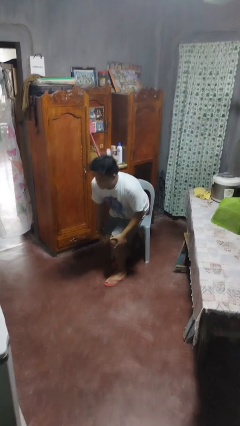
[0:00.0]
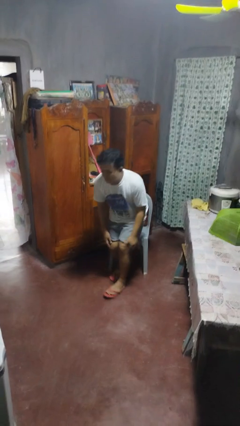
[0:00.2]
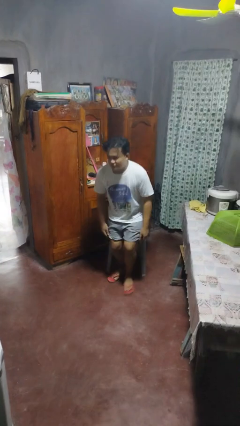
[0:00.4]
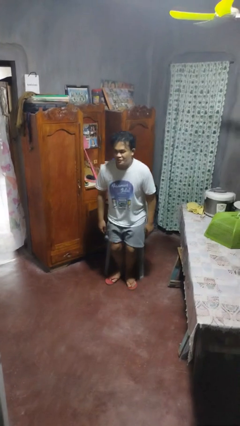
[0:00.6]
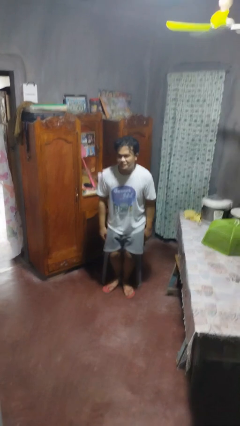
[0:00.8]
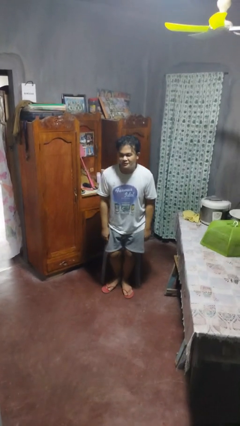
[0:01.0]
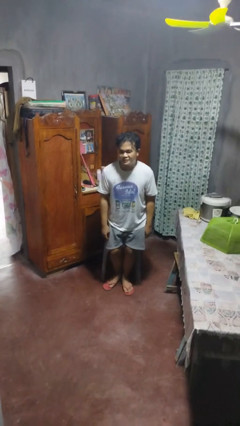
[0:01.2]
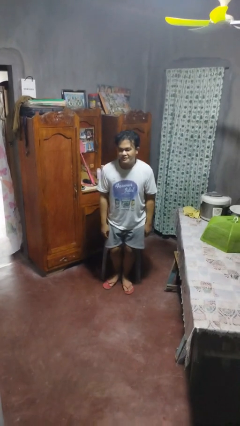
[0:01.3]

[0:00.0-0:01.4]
person stands up from floor

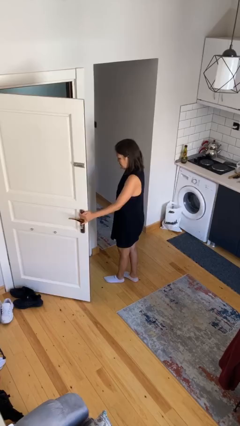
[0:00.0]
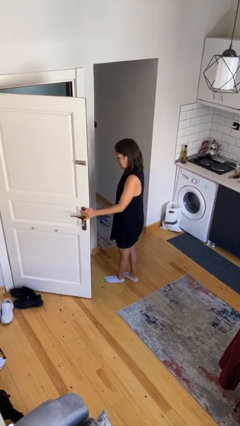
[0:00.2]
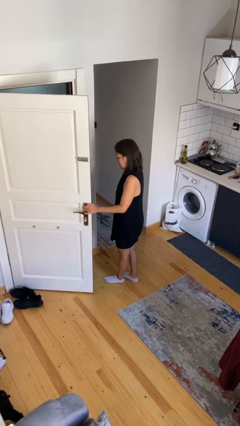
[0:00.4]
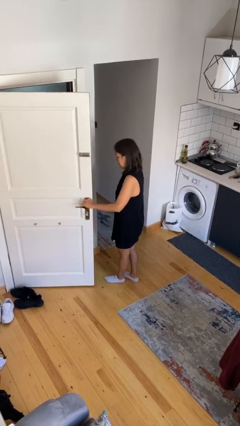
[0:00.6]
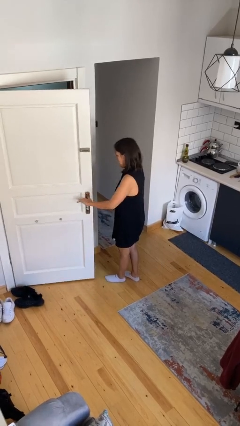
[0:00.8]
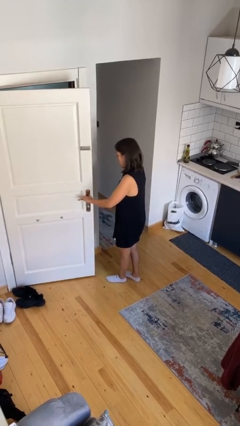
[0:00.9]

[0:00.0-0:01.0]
person closes facility door

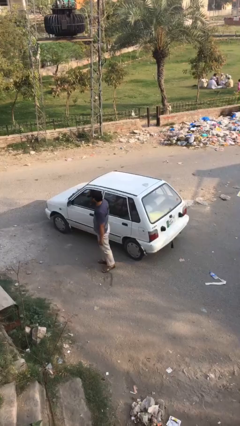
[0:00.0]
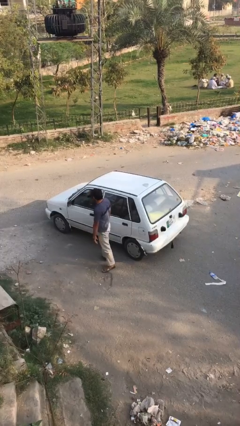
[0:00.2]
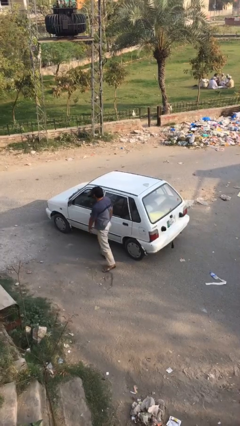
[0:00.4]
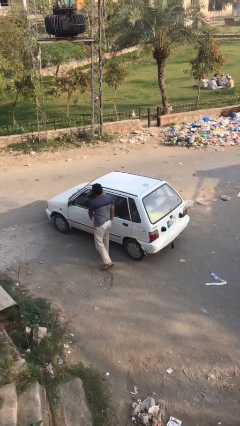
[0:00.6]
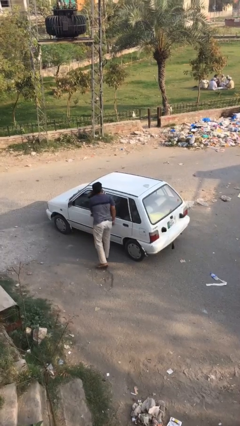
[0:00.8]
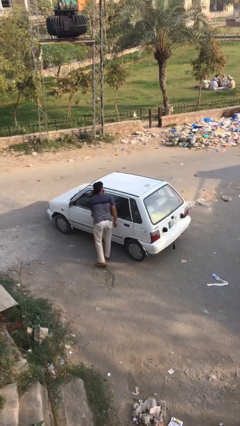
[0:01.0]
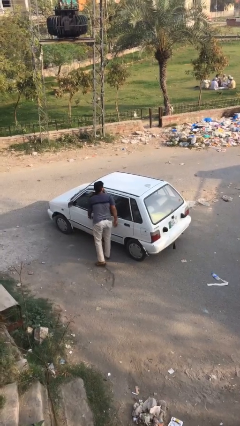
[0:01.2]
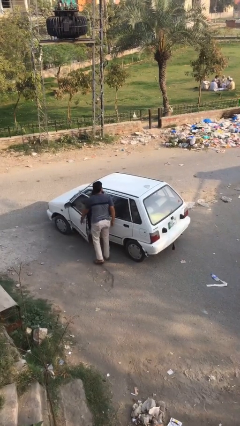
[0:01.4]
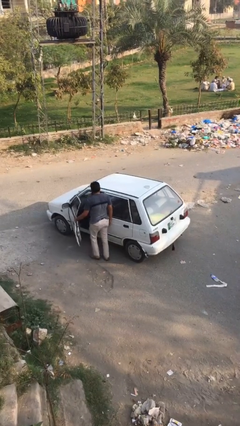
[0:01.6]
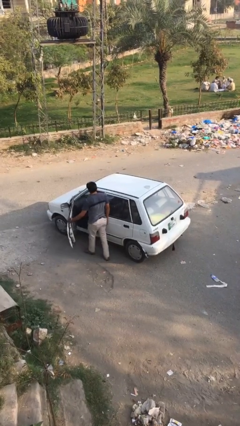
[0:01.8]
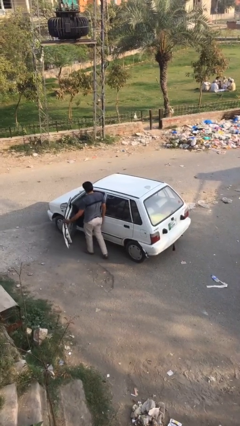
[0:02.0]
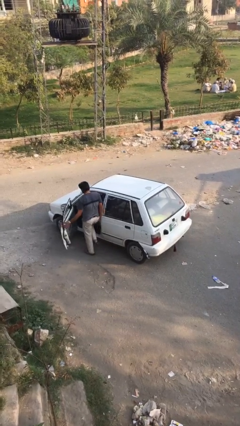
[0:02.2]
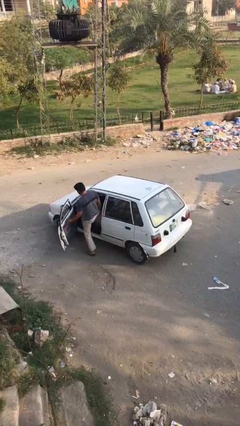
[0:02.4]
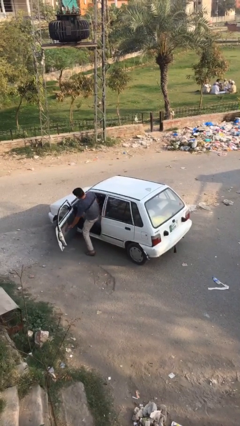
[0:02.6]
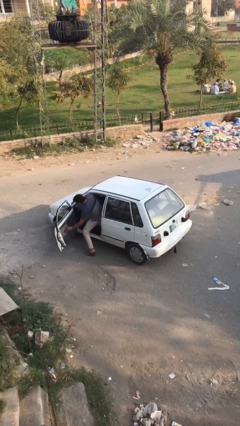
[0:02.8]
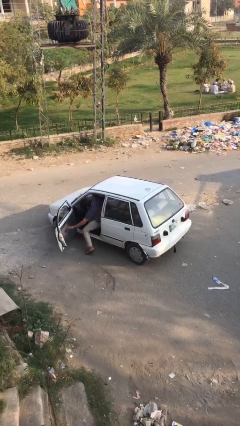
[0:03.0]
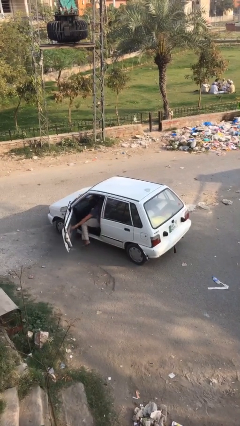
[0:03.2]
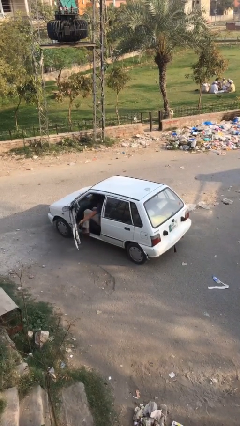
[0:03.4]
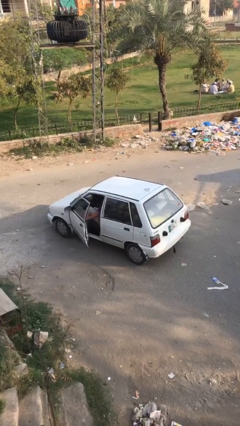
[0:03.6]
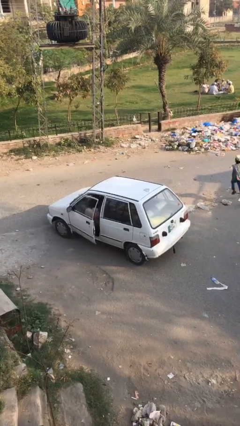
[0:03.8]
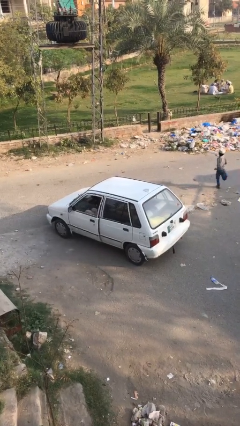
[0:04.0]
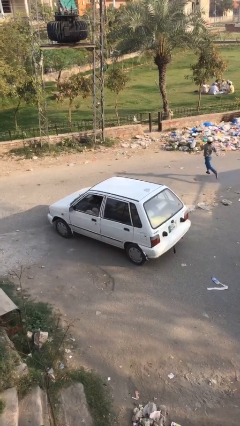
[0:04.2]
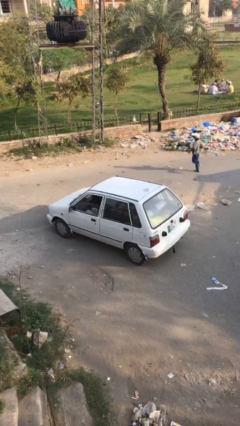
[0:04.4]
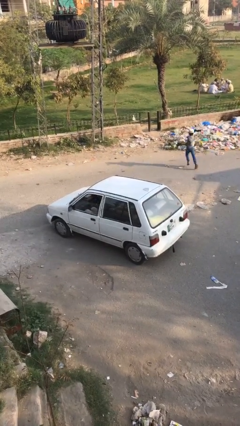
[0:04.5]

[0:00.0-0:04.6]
car picks up person

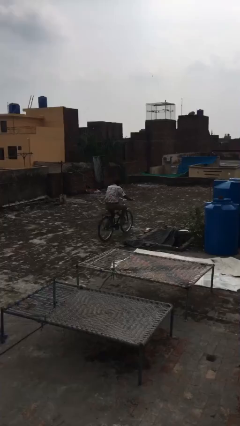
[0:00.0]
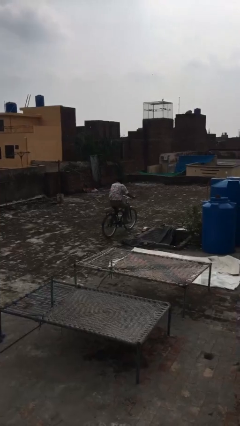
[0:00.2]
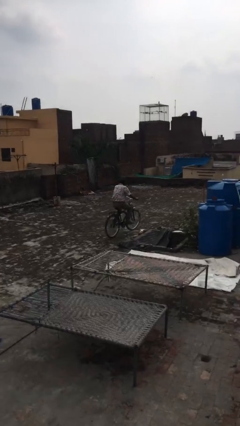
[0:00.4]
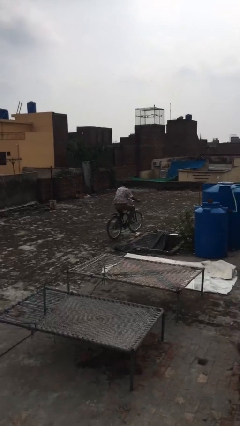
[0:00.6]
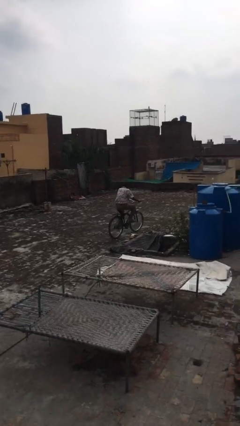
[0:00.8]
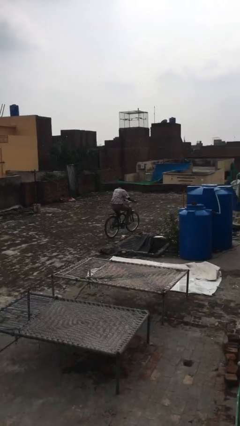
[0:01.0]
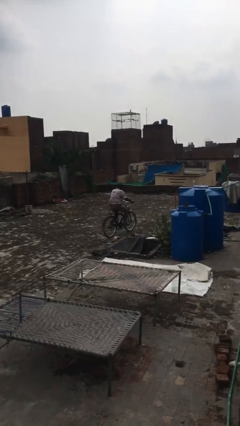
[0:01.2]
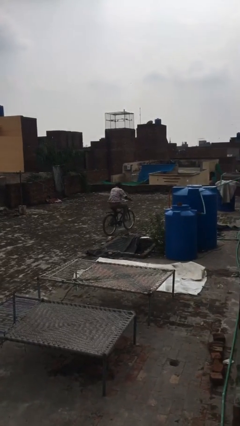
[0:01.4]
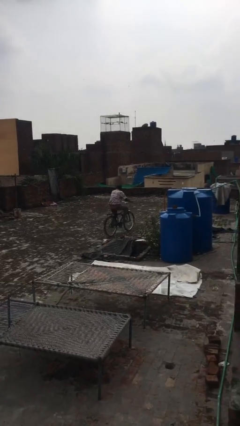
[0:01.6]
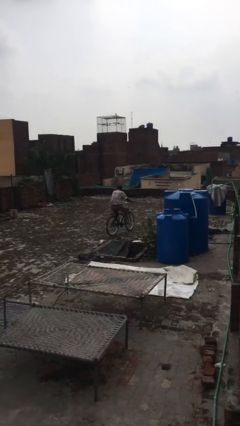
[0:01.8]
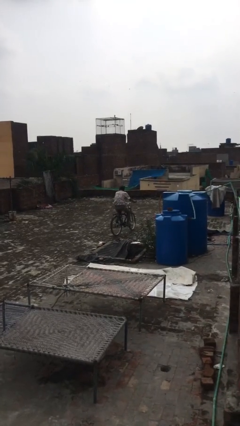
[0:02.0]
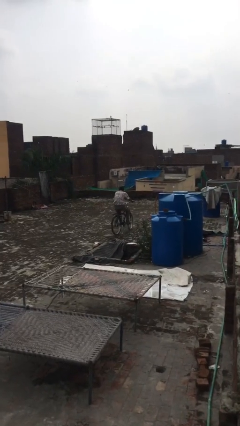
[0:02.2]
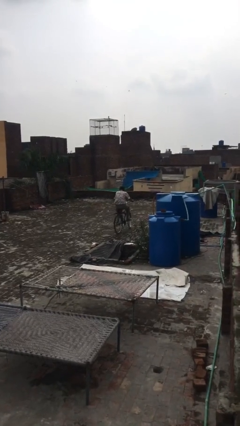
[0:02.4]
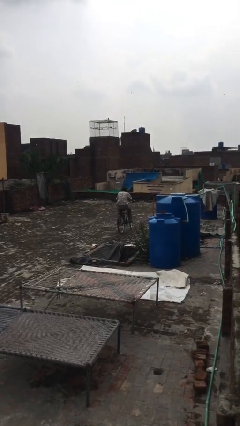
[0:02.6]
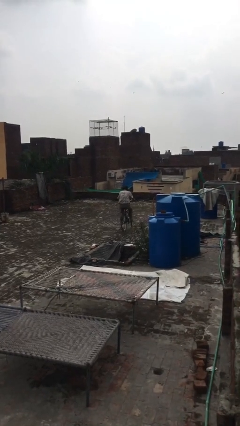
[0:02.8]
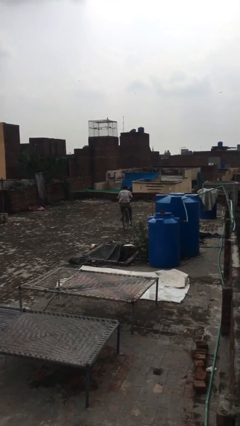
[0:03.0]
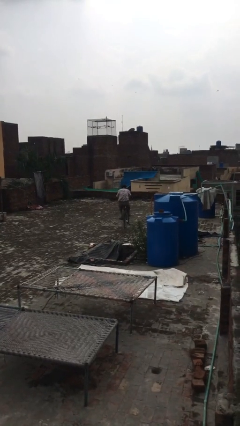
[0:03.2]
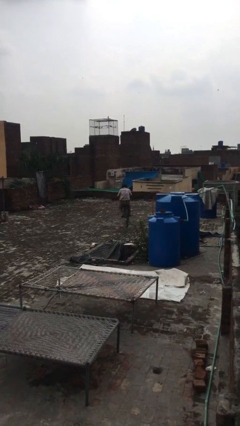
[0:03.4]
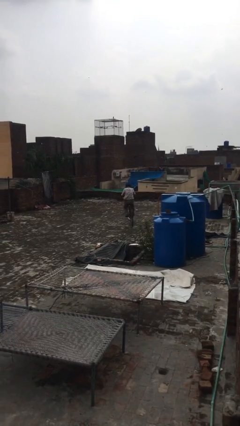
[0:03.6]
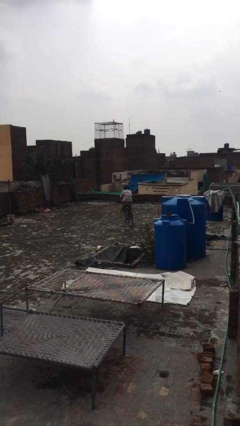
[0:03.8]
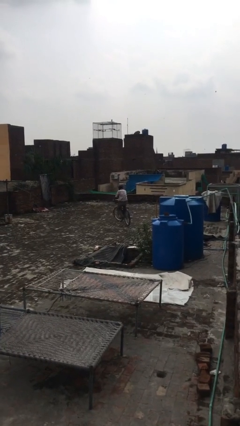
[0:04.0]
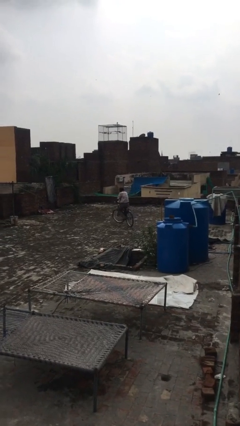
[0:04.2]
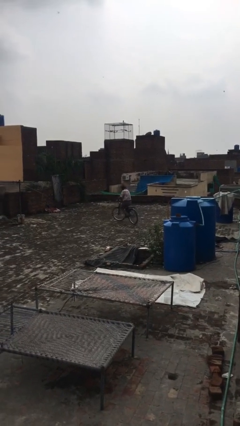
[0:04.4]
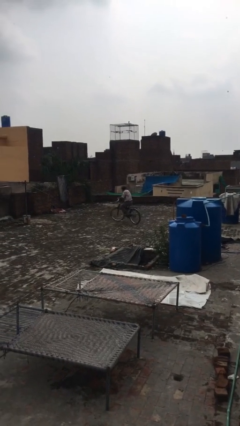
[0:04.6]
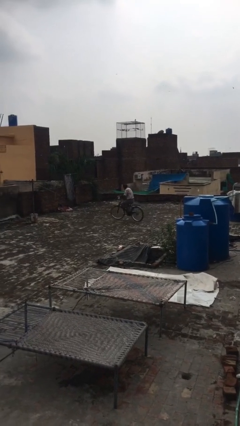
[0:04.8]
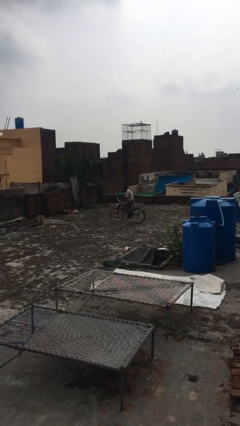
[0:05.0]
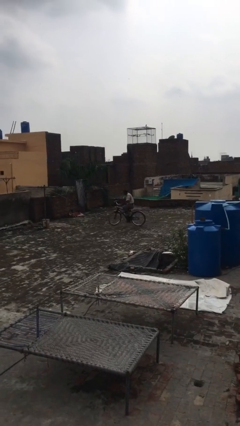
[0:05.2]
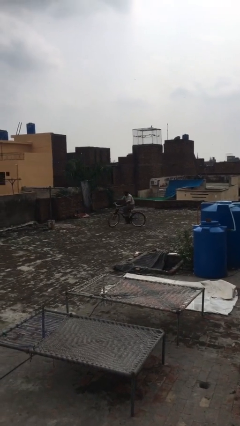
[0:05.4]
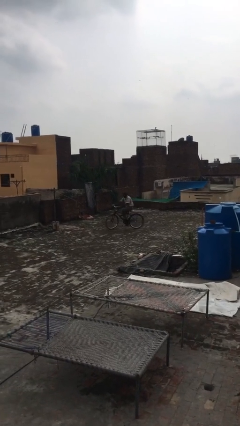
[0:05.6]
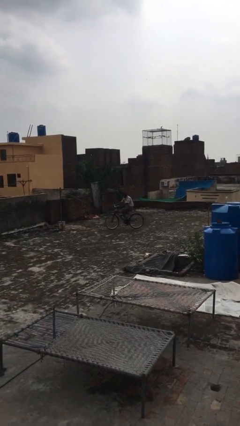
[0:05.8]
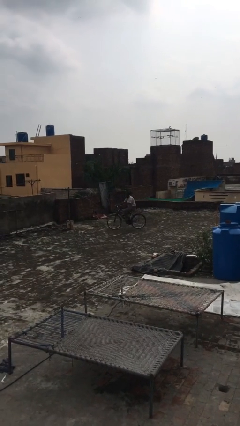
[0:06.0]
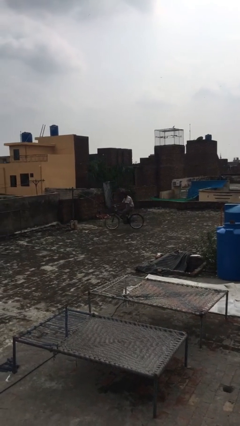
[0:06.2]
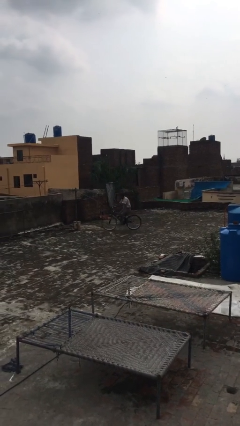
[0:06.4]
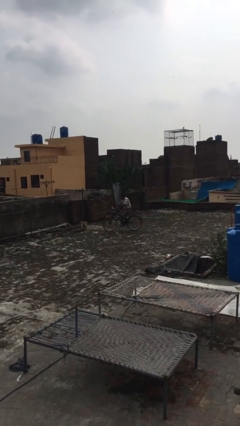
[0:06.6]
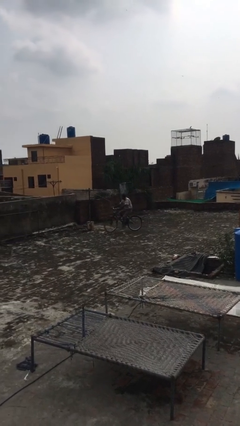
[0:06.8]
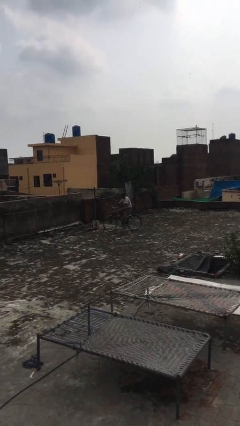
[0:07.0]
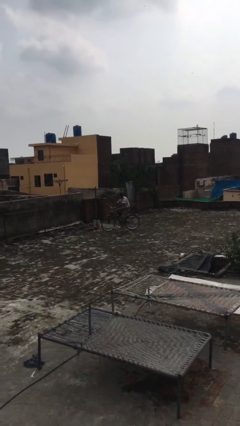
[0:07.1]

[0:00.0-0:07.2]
person rides bicycle

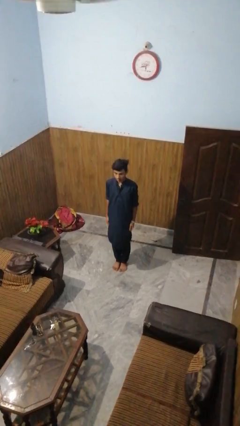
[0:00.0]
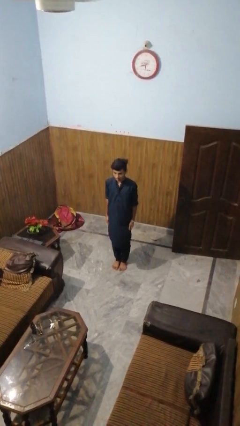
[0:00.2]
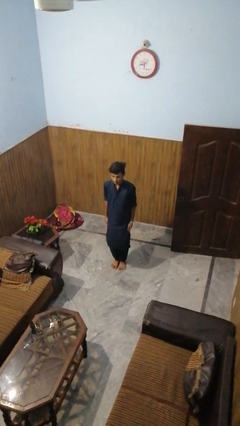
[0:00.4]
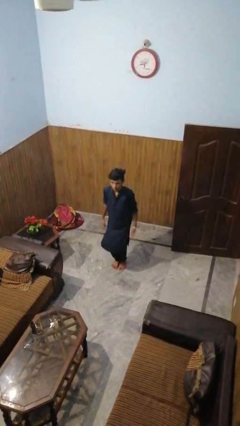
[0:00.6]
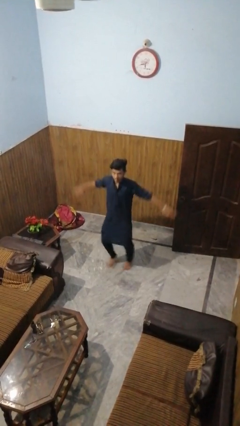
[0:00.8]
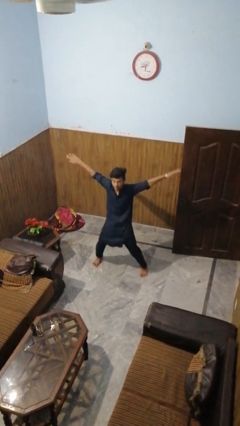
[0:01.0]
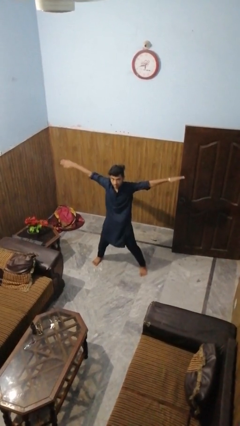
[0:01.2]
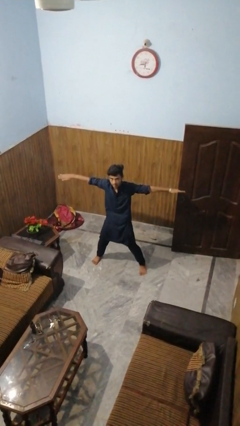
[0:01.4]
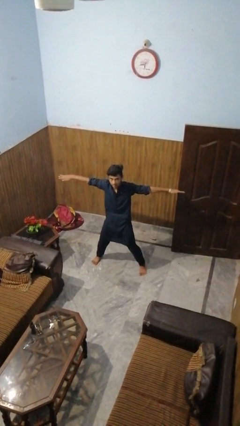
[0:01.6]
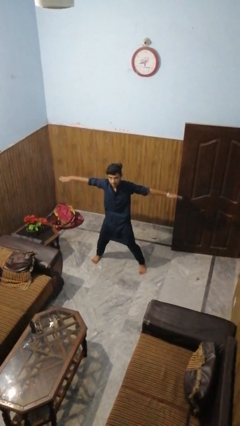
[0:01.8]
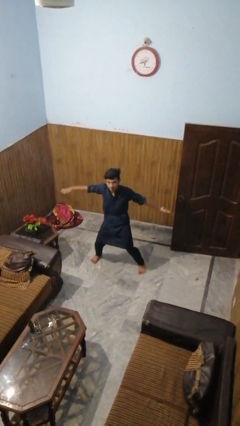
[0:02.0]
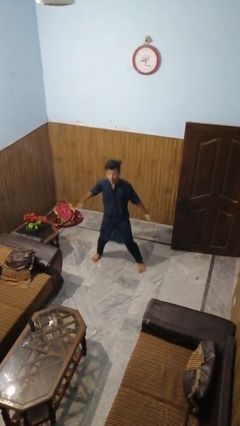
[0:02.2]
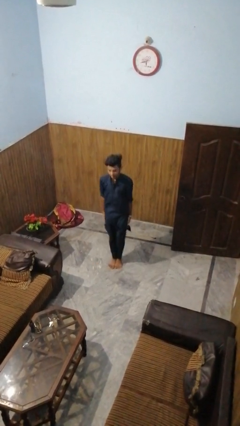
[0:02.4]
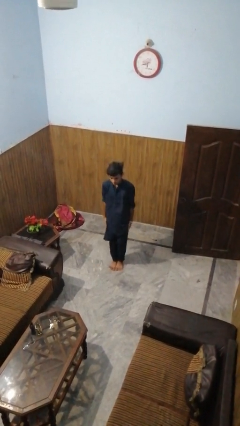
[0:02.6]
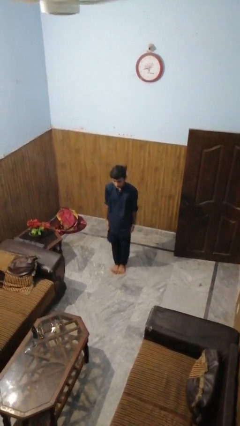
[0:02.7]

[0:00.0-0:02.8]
person exercises with jumping jacks

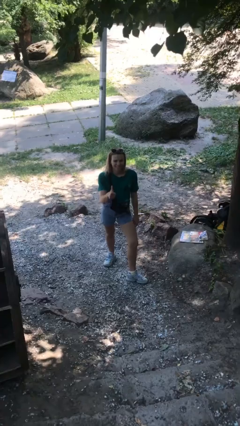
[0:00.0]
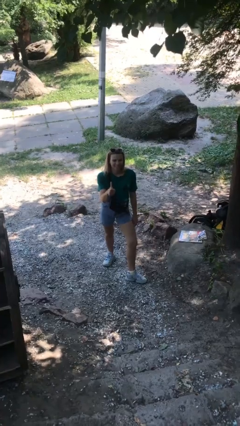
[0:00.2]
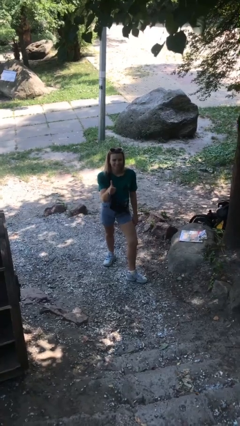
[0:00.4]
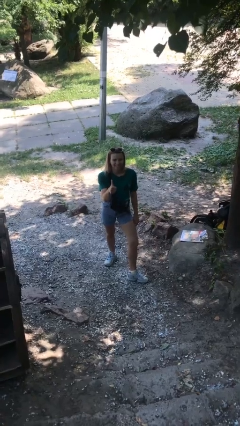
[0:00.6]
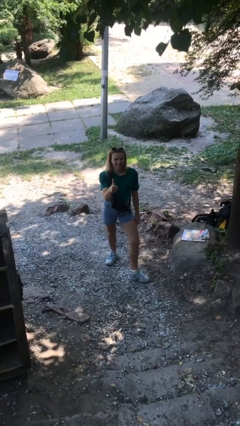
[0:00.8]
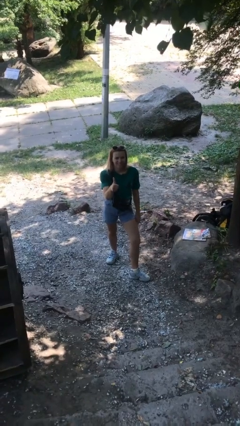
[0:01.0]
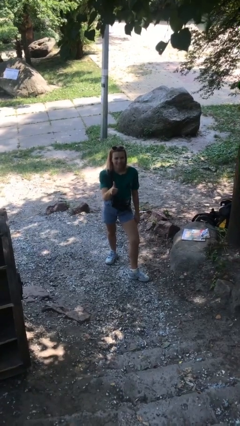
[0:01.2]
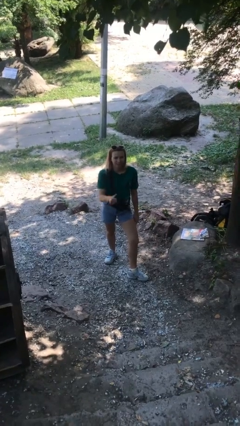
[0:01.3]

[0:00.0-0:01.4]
person gestures thumbs up
